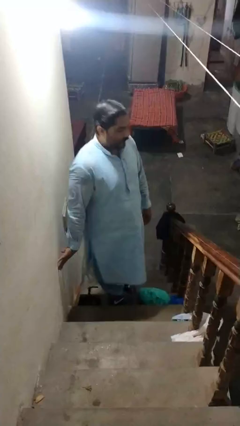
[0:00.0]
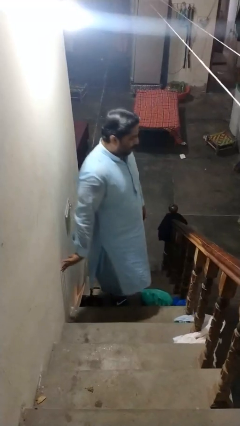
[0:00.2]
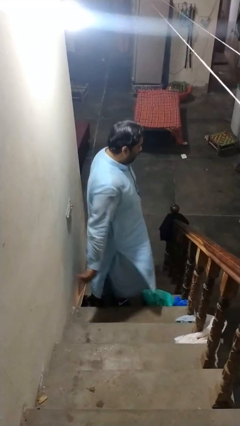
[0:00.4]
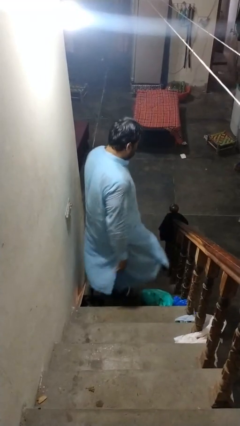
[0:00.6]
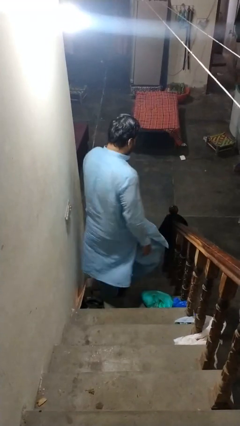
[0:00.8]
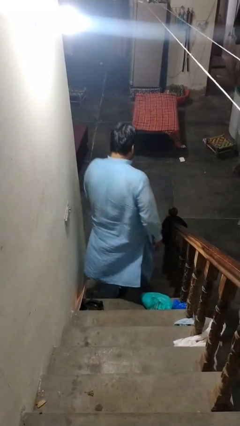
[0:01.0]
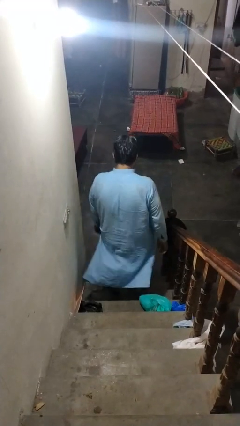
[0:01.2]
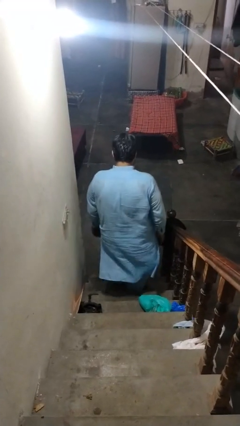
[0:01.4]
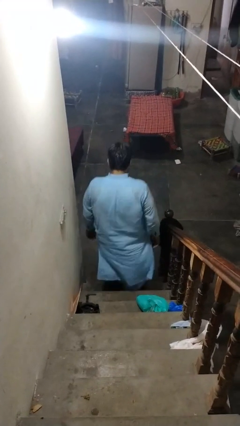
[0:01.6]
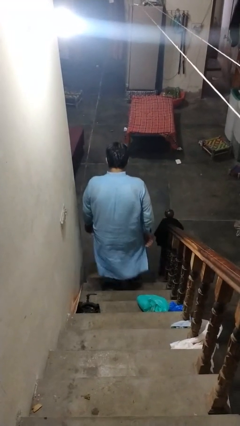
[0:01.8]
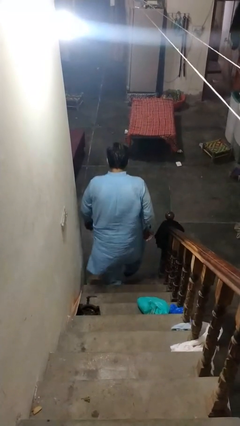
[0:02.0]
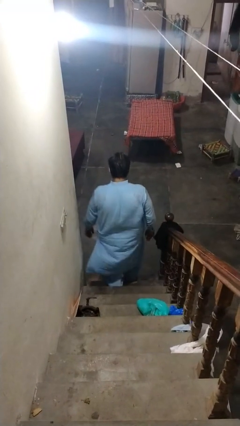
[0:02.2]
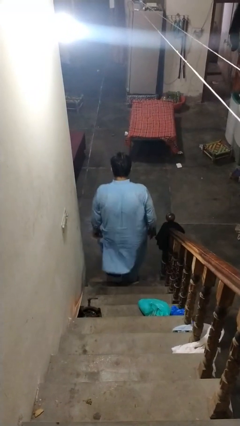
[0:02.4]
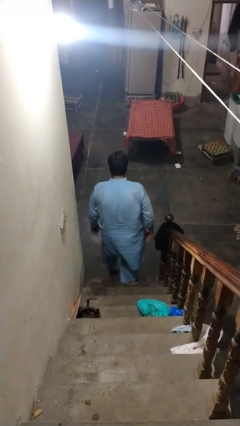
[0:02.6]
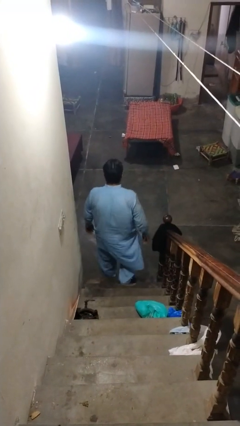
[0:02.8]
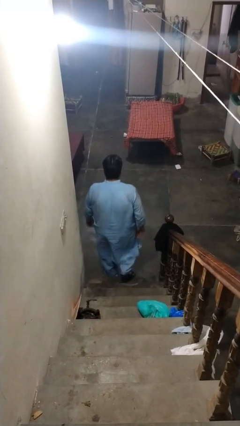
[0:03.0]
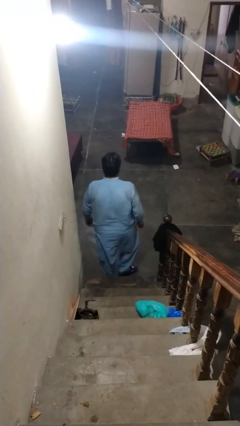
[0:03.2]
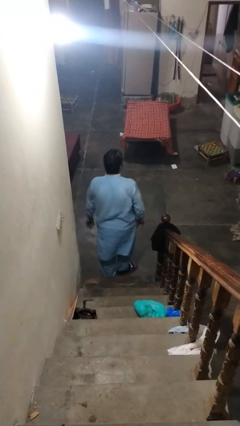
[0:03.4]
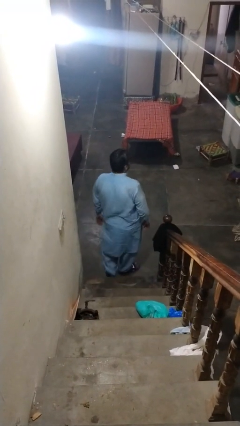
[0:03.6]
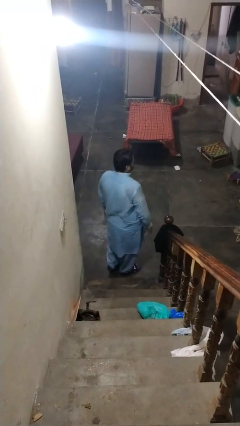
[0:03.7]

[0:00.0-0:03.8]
person climbs down stairs

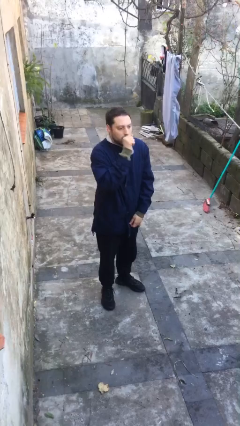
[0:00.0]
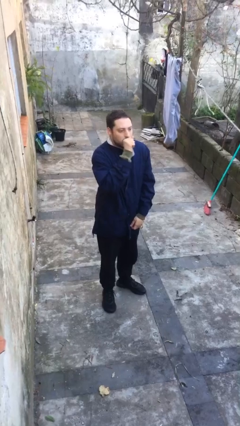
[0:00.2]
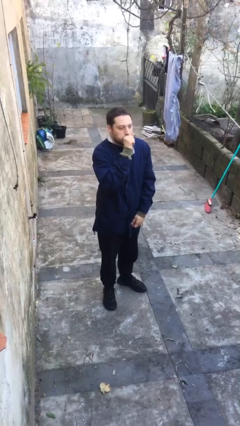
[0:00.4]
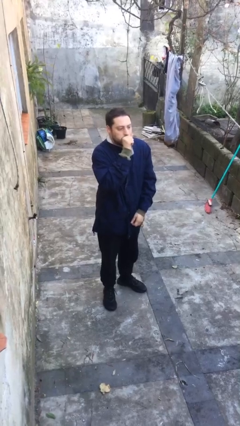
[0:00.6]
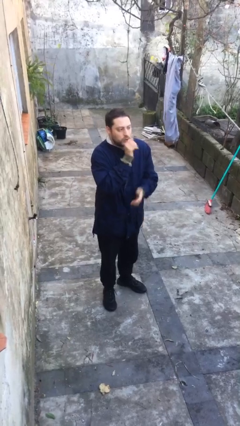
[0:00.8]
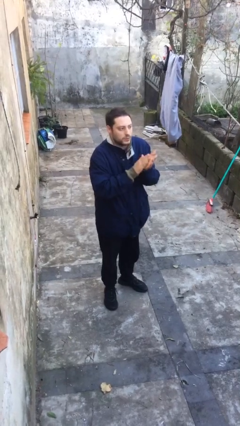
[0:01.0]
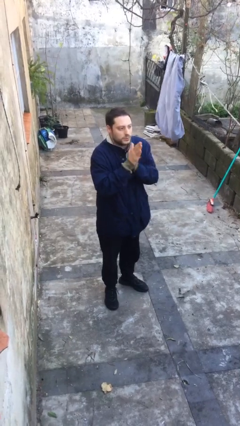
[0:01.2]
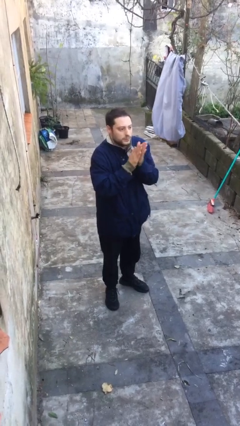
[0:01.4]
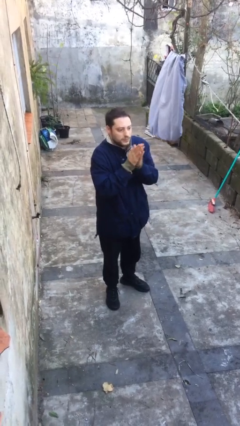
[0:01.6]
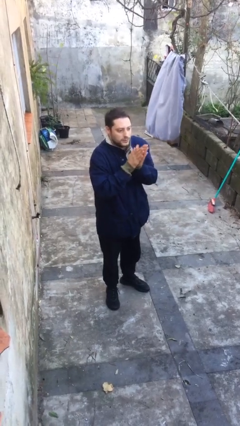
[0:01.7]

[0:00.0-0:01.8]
person blows into hands

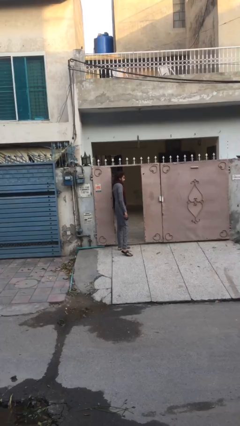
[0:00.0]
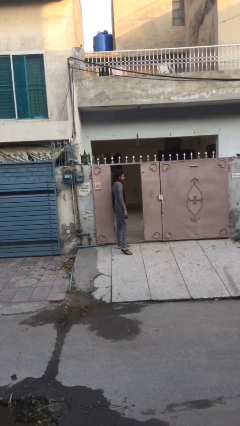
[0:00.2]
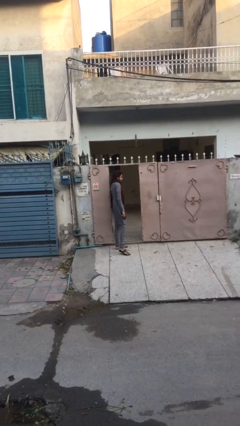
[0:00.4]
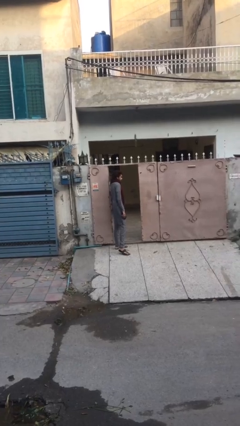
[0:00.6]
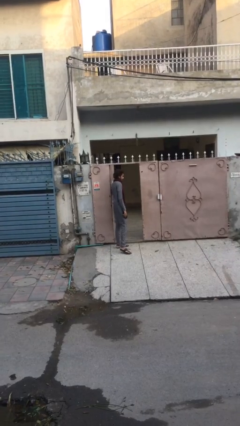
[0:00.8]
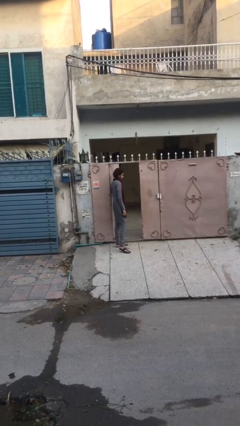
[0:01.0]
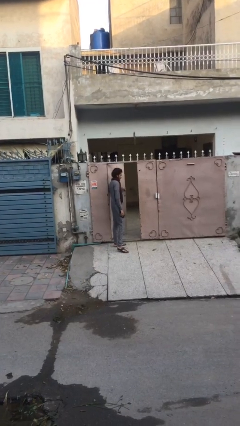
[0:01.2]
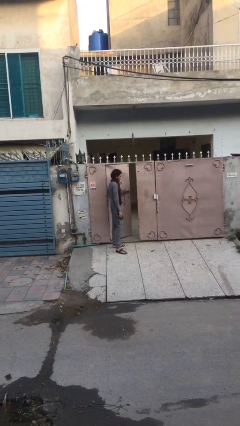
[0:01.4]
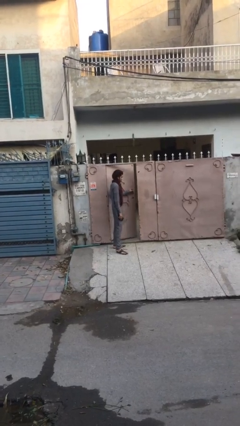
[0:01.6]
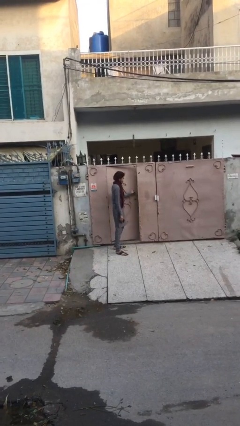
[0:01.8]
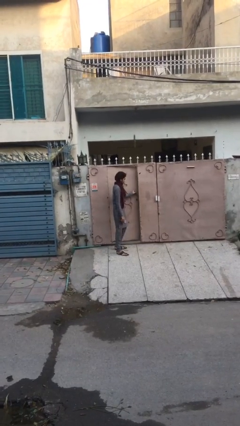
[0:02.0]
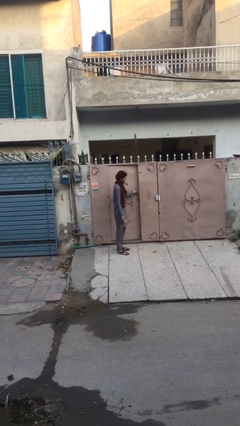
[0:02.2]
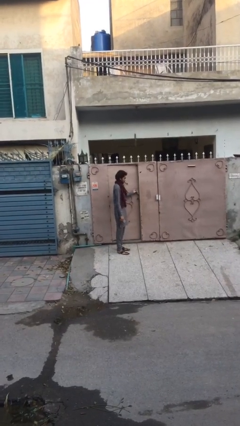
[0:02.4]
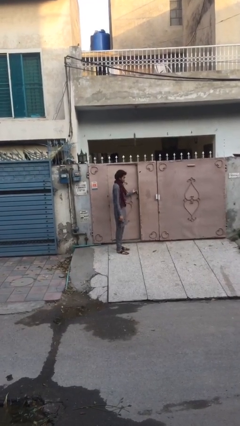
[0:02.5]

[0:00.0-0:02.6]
person closes facility door

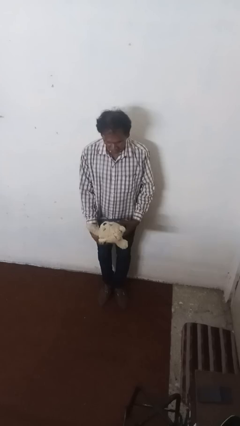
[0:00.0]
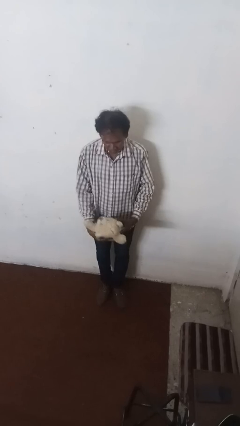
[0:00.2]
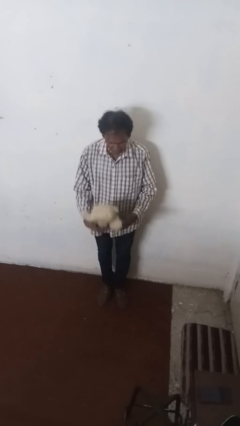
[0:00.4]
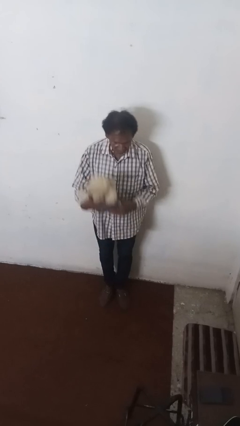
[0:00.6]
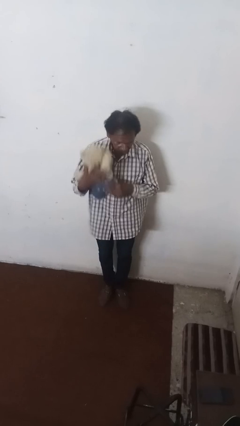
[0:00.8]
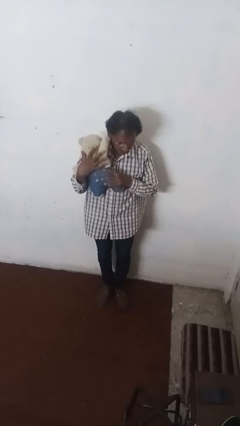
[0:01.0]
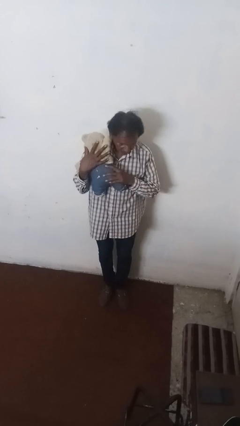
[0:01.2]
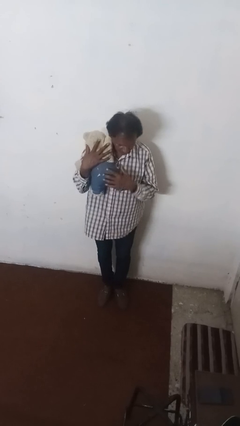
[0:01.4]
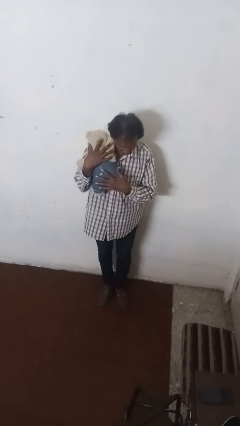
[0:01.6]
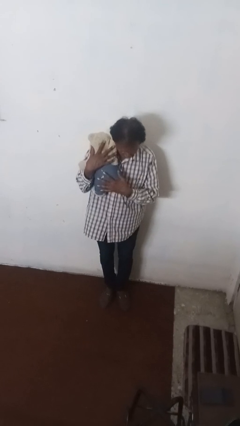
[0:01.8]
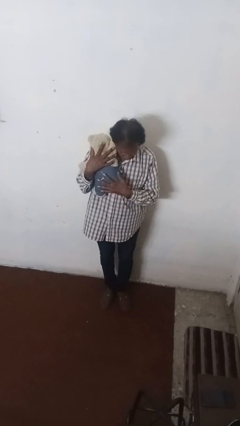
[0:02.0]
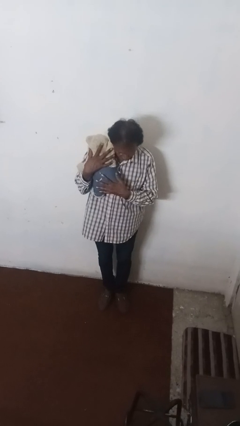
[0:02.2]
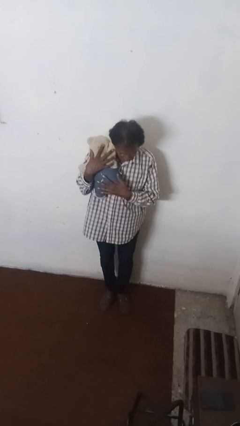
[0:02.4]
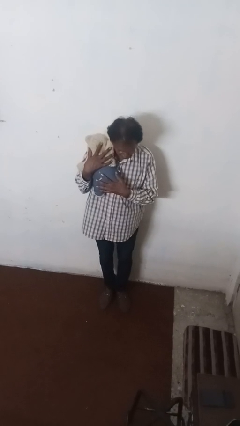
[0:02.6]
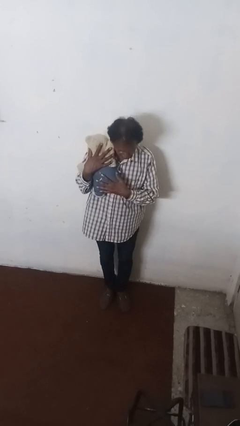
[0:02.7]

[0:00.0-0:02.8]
person hugs stuffed animal

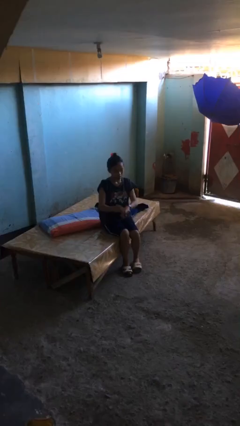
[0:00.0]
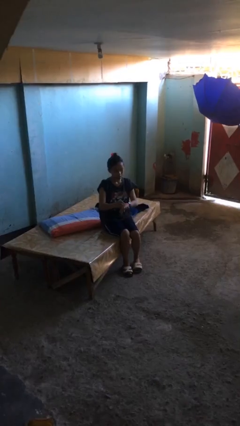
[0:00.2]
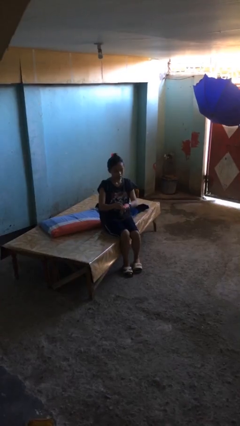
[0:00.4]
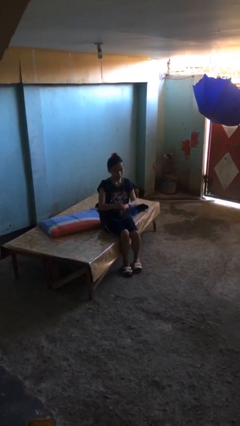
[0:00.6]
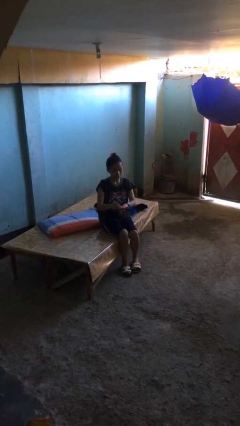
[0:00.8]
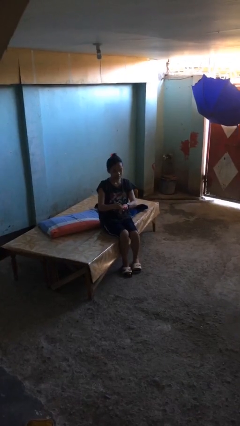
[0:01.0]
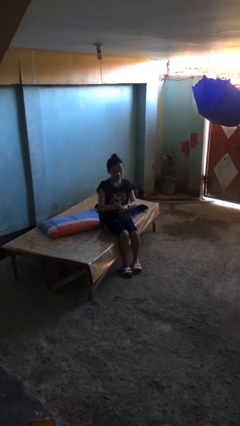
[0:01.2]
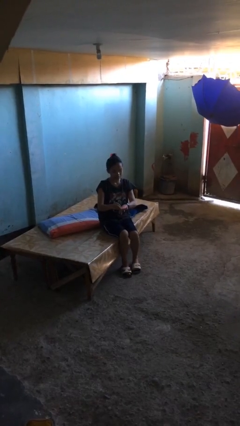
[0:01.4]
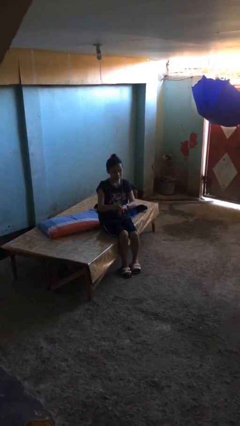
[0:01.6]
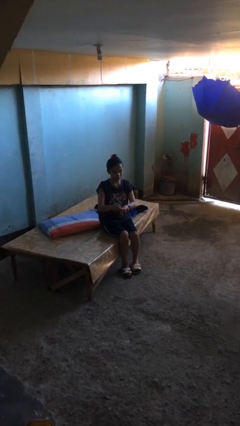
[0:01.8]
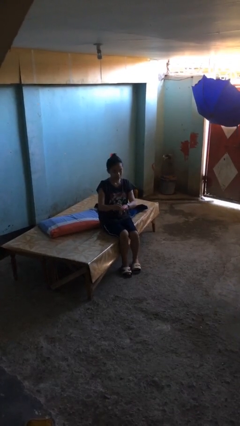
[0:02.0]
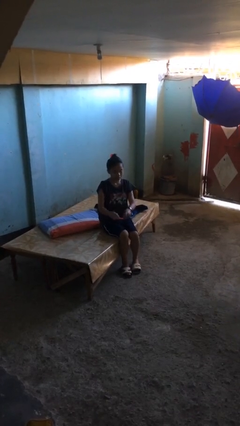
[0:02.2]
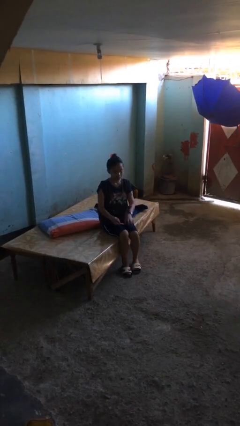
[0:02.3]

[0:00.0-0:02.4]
person files fingernails

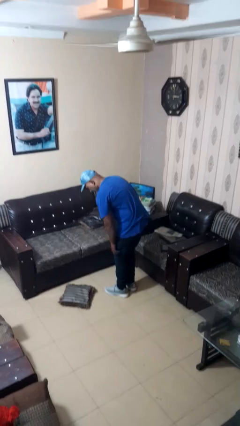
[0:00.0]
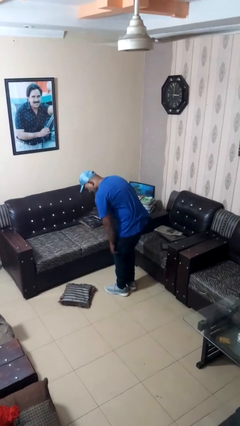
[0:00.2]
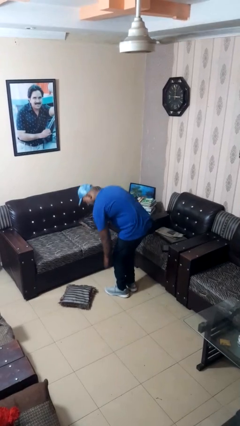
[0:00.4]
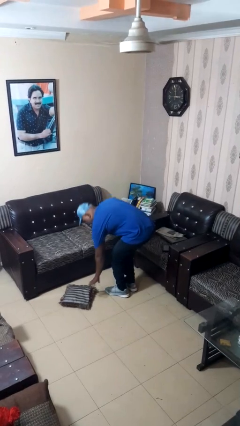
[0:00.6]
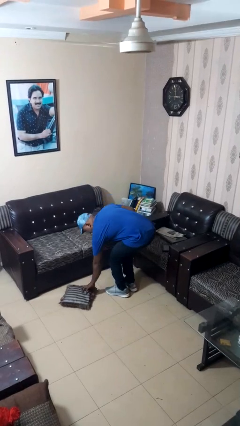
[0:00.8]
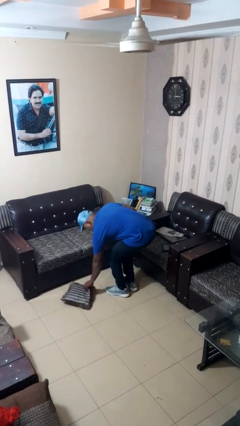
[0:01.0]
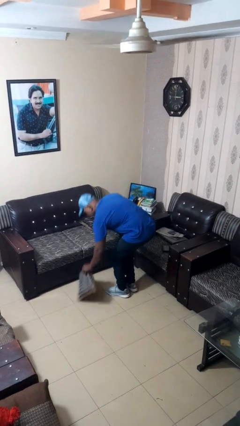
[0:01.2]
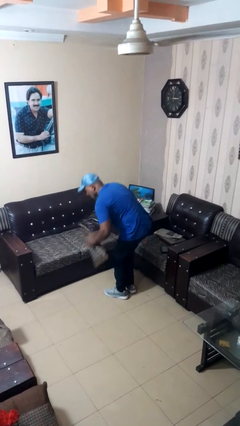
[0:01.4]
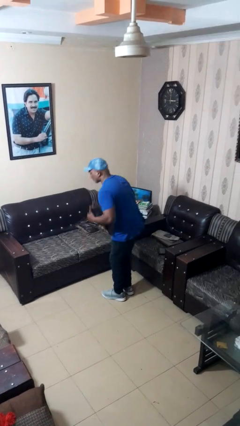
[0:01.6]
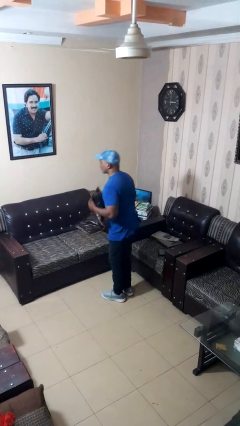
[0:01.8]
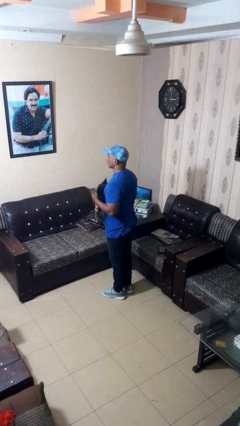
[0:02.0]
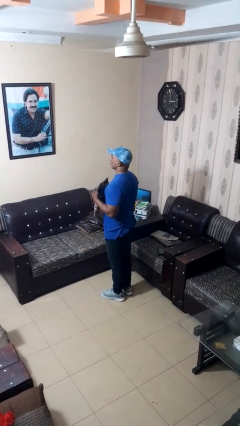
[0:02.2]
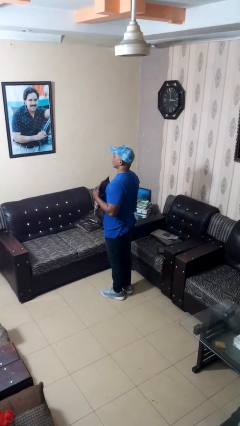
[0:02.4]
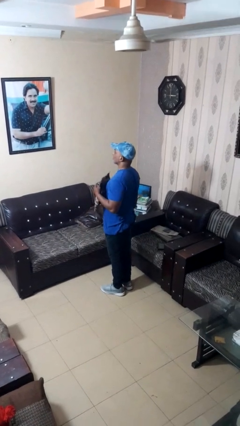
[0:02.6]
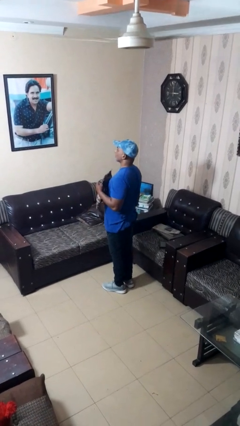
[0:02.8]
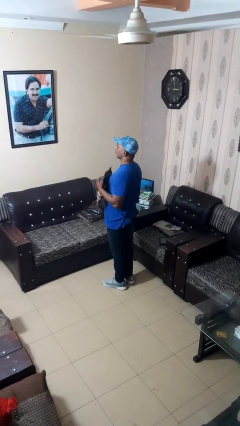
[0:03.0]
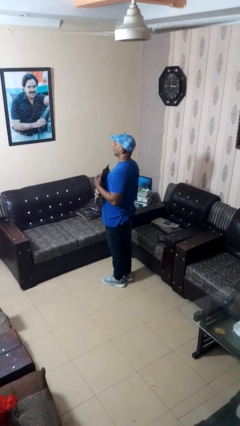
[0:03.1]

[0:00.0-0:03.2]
person picks up object from floor

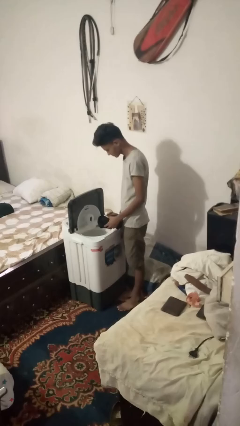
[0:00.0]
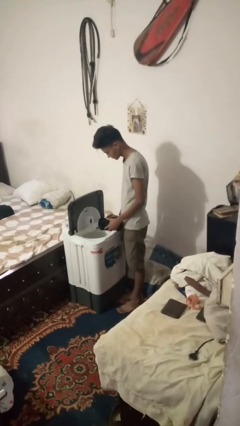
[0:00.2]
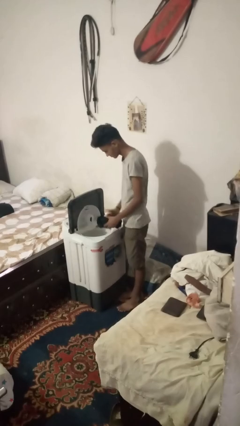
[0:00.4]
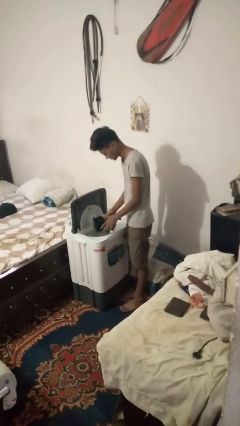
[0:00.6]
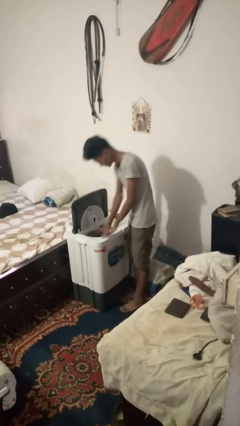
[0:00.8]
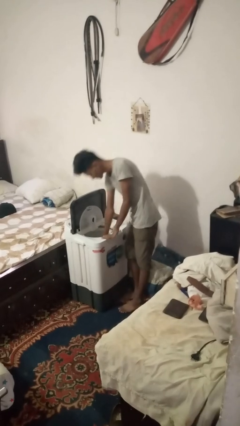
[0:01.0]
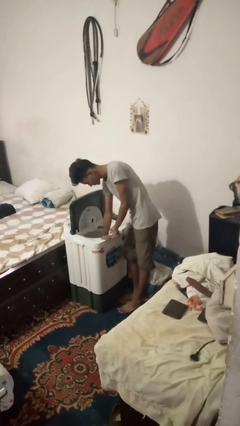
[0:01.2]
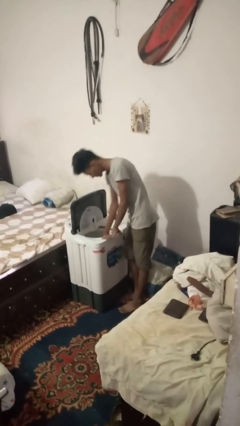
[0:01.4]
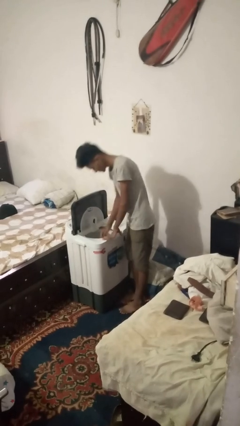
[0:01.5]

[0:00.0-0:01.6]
person loads clotheswasher
